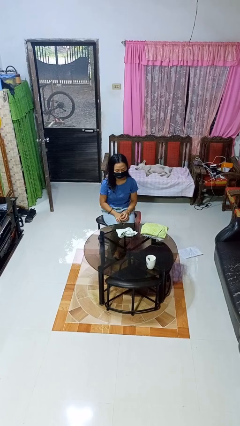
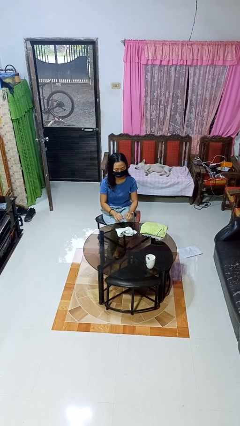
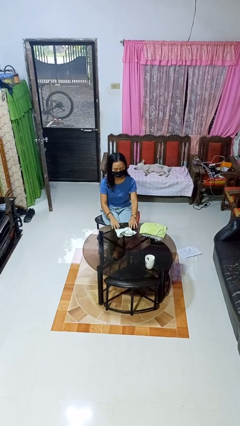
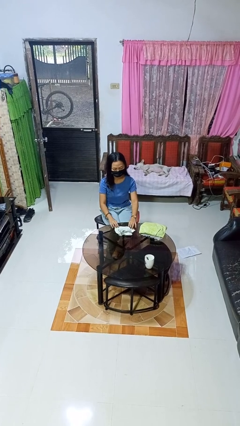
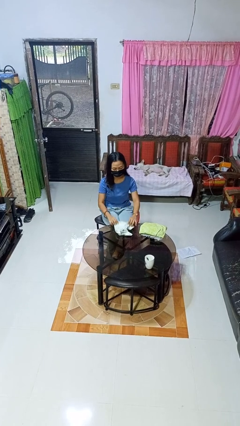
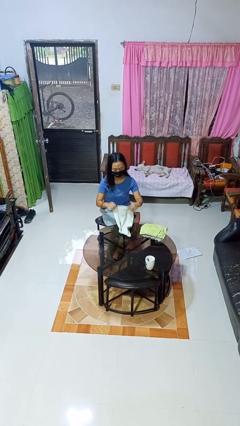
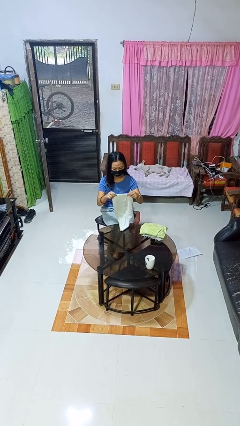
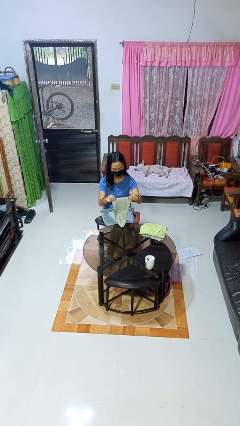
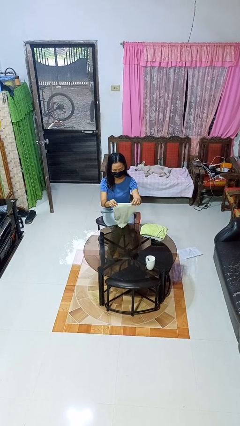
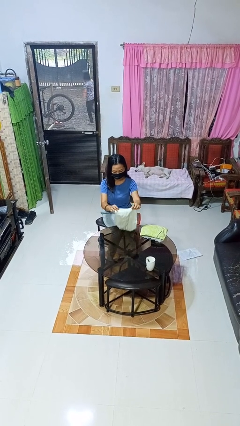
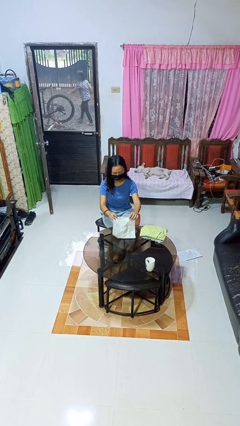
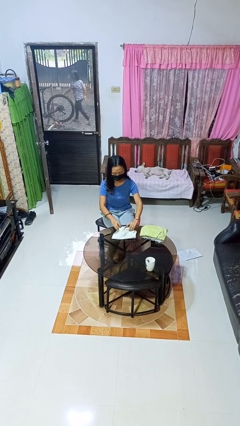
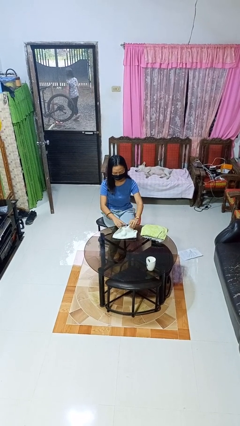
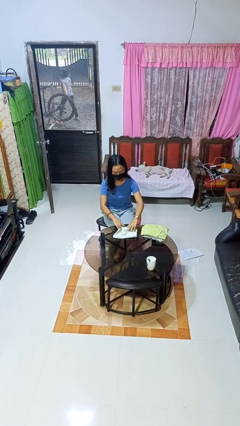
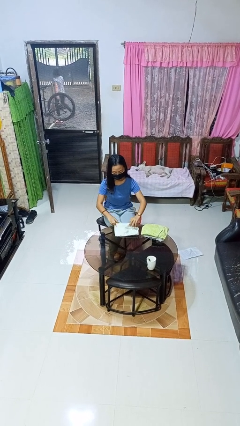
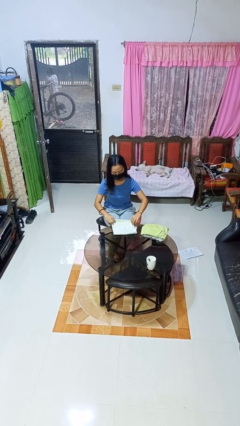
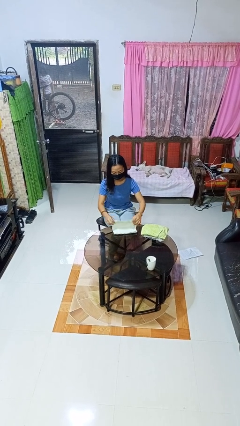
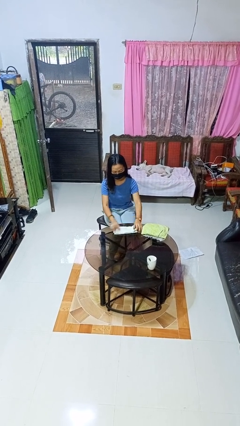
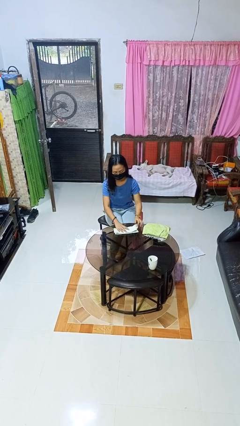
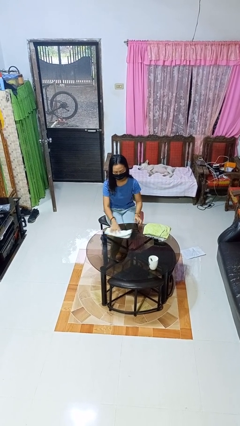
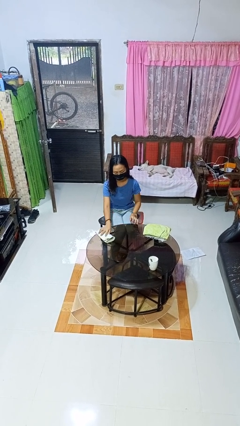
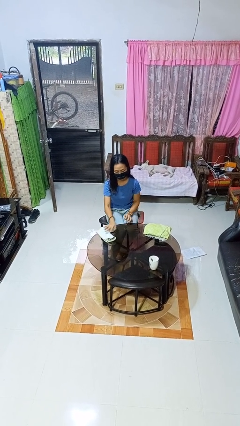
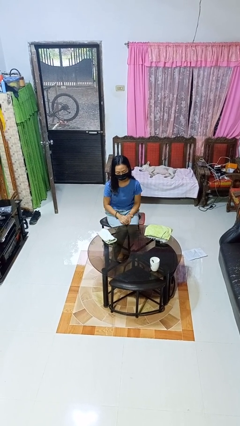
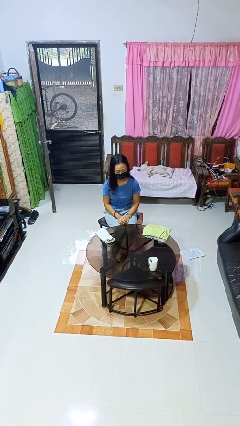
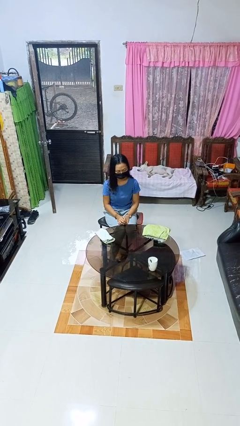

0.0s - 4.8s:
person folds towel

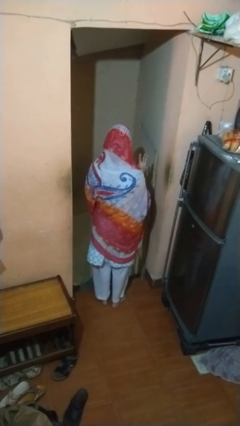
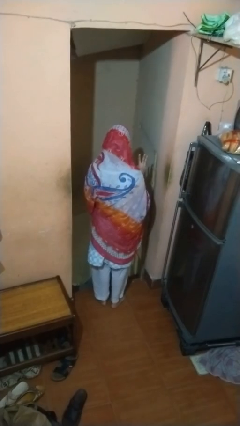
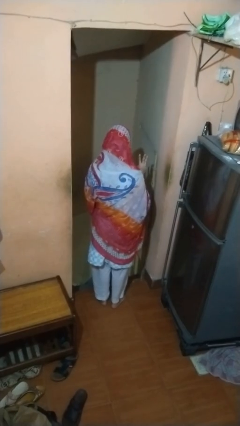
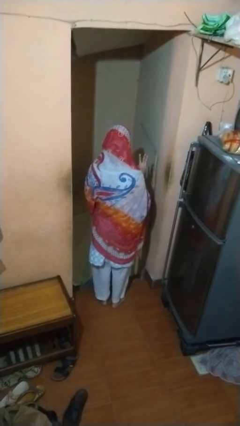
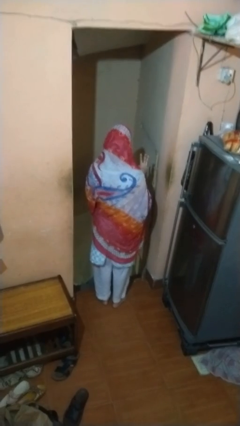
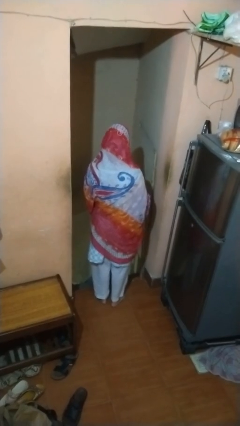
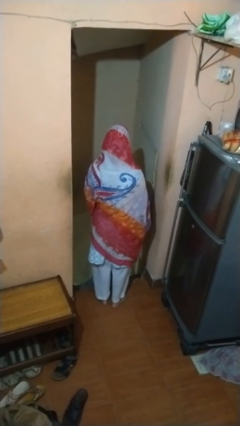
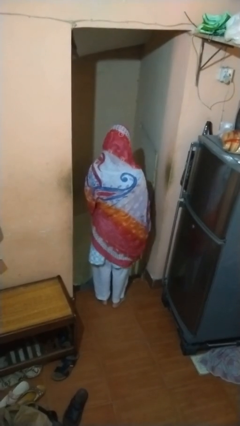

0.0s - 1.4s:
person gestures number three

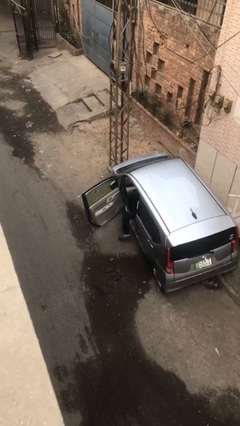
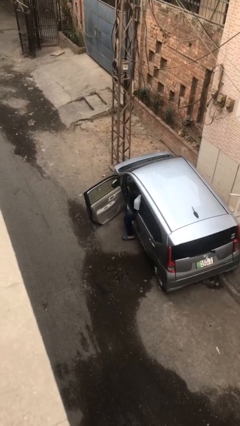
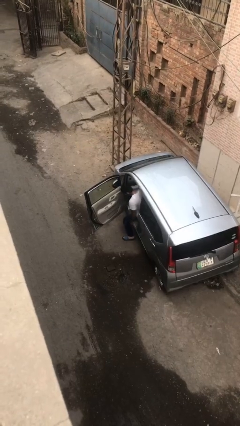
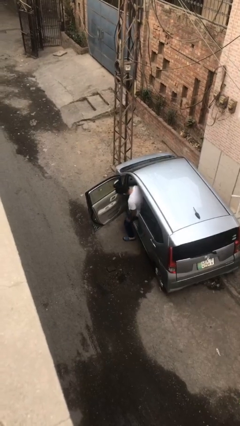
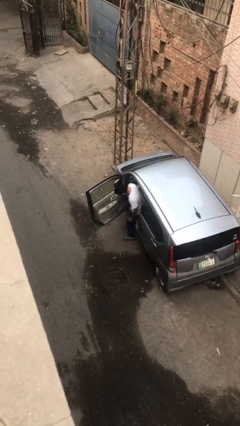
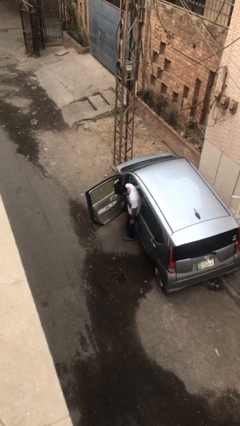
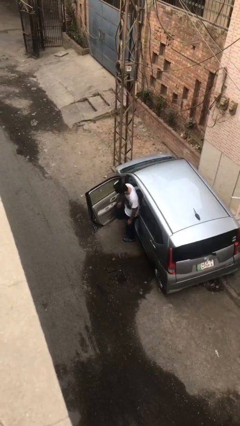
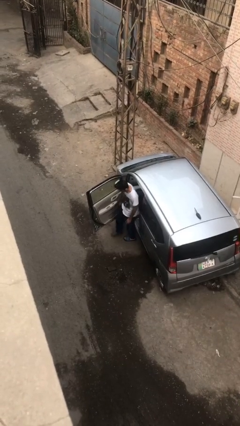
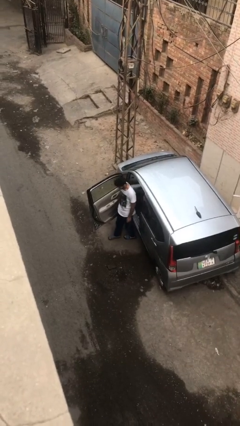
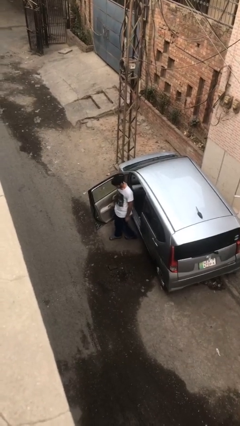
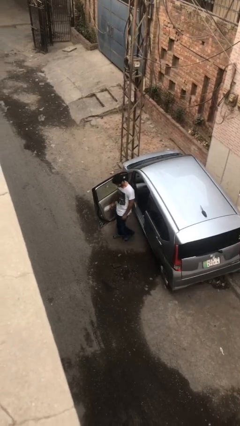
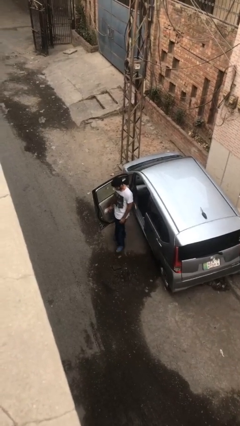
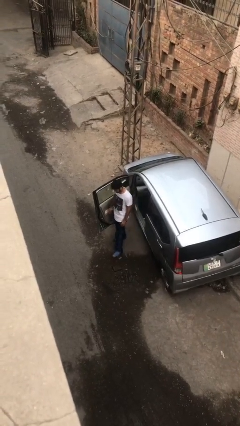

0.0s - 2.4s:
person exits car

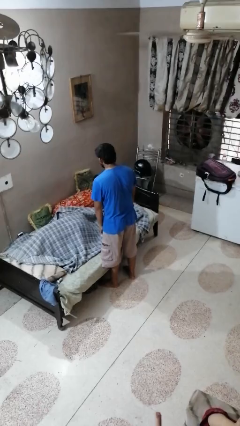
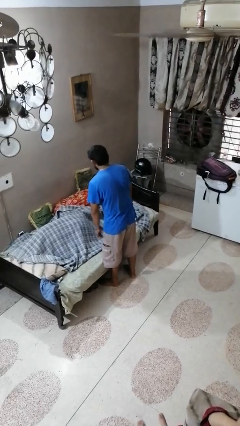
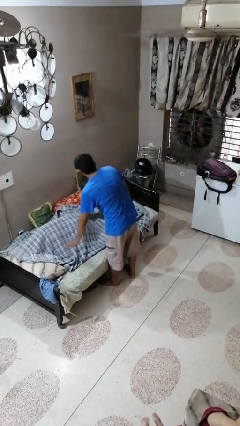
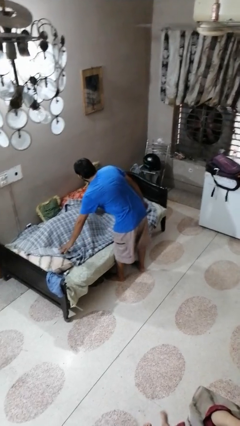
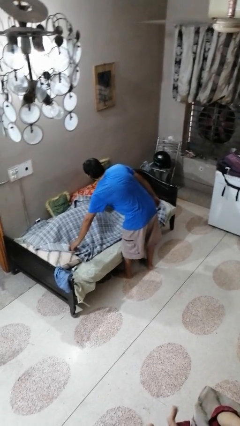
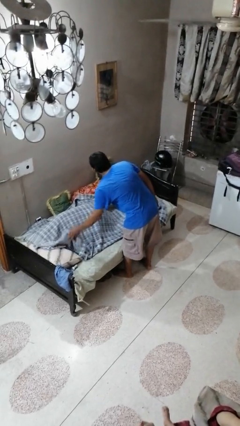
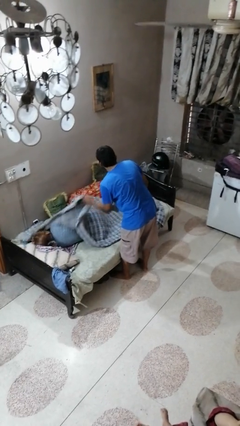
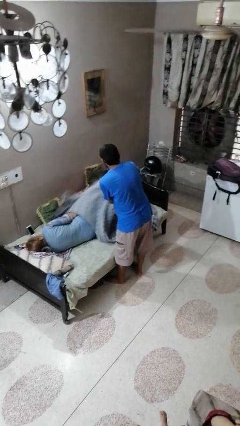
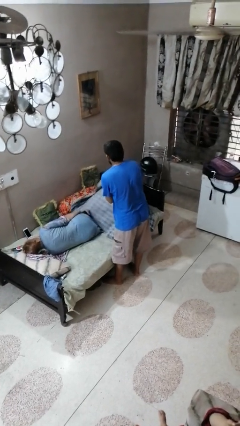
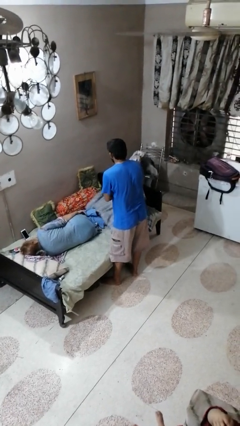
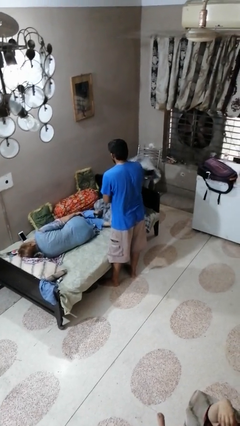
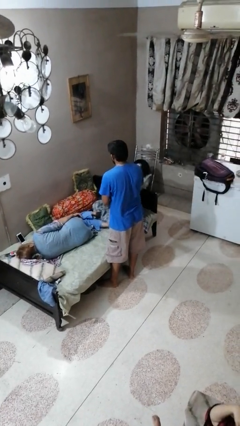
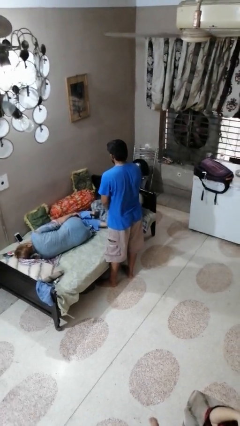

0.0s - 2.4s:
person uncovers friend with blanket

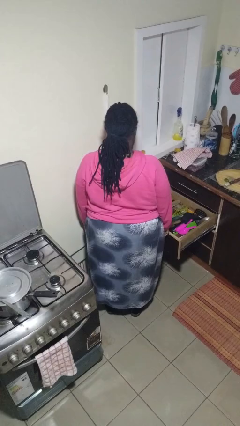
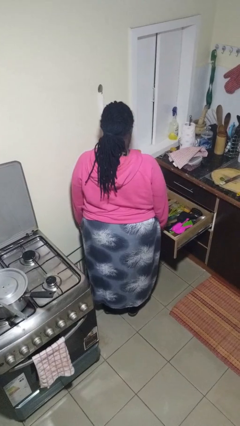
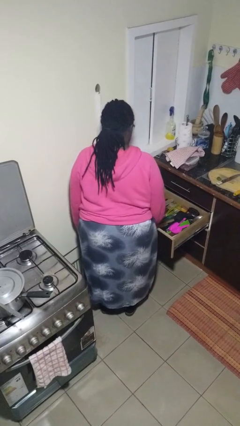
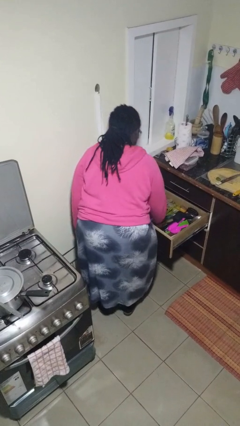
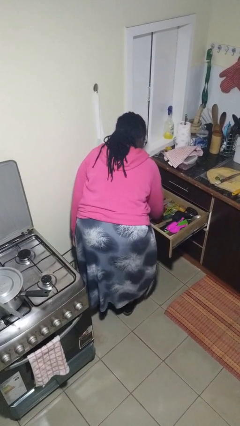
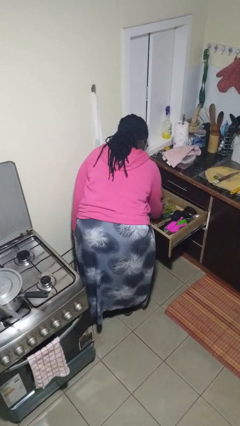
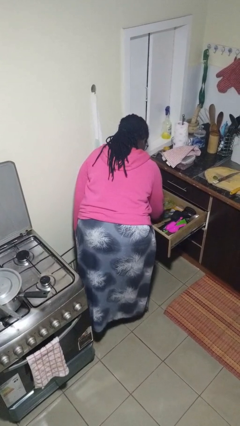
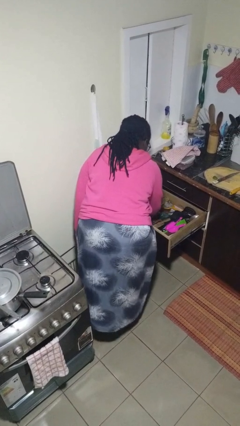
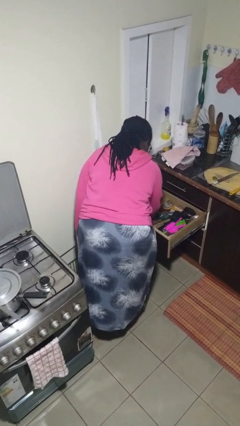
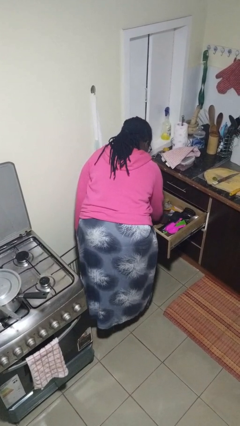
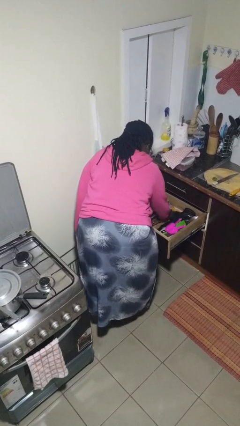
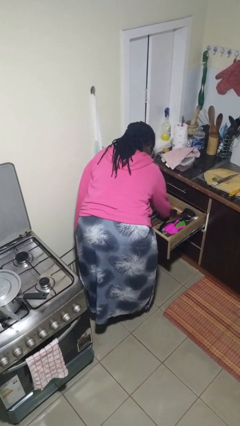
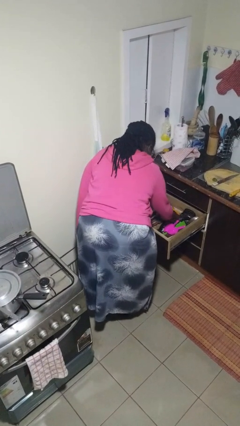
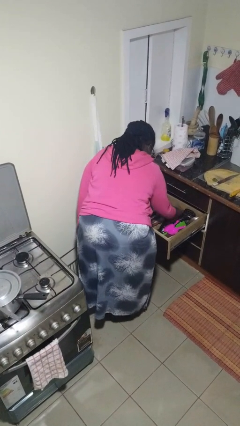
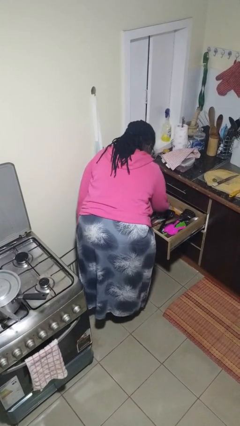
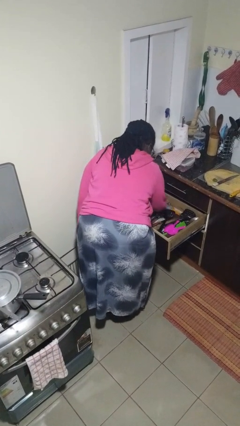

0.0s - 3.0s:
person searches in kitchen drawer

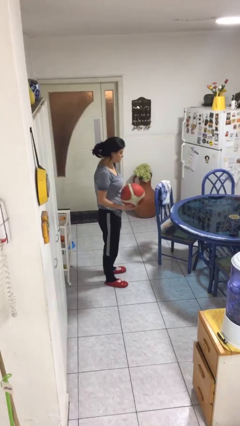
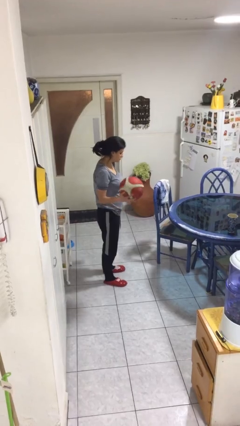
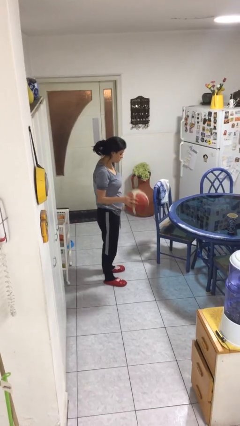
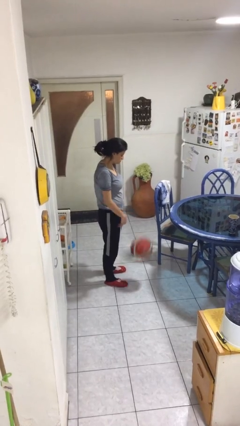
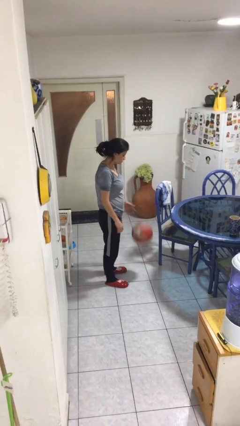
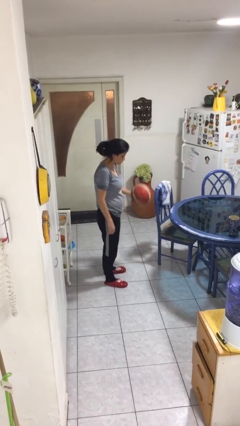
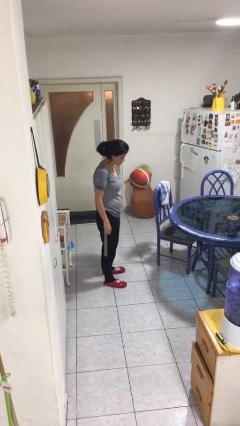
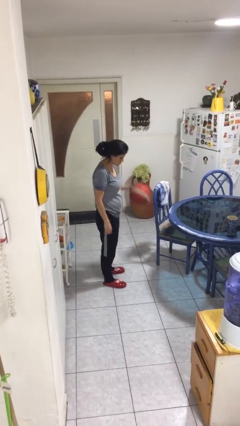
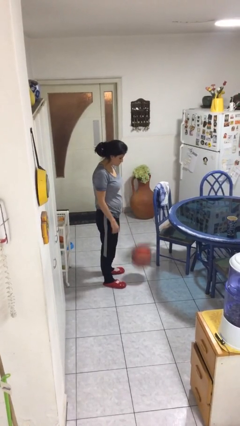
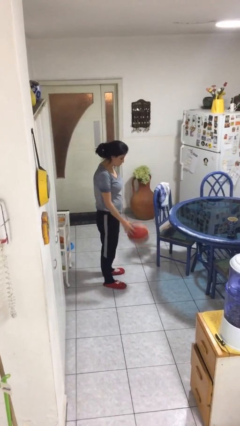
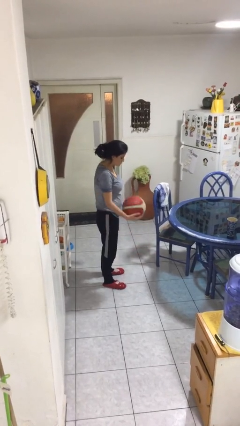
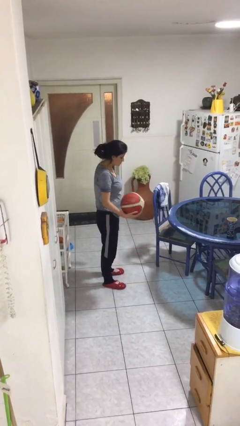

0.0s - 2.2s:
person bounces ball on floor

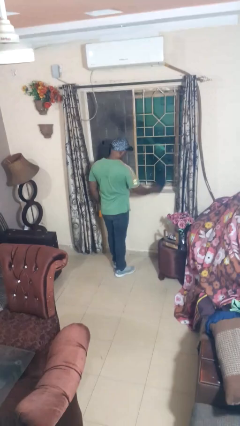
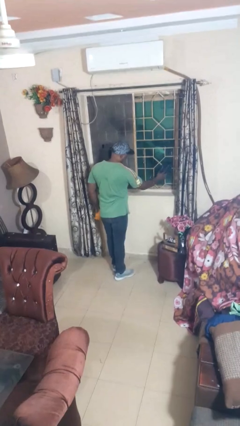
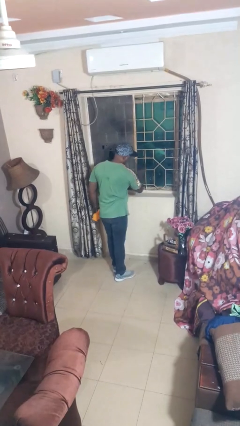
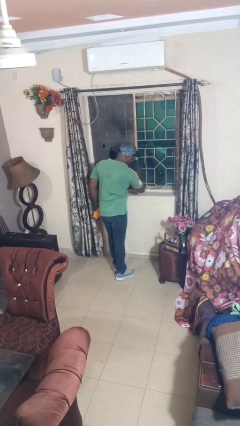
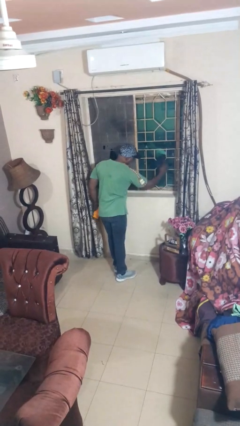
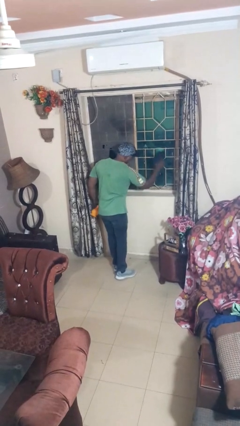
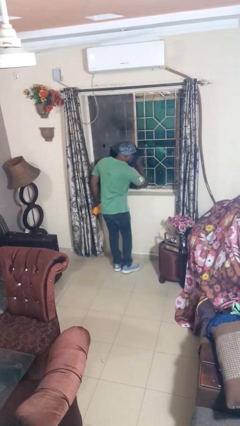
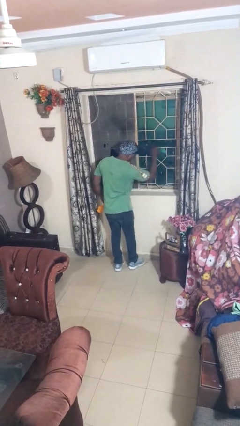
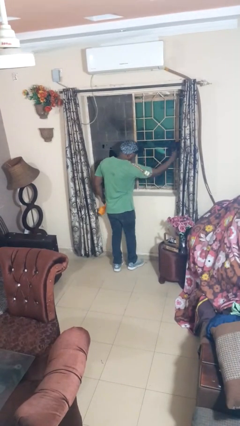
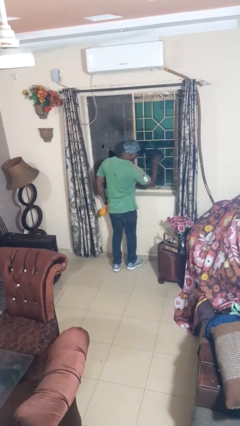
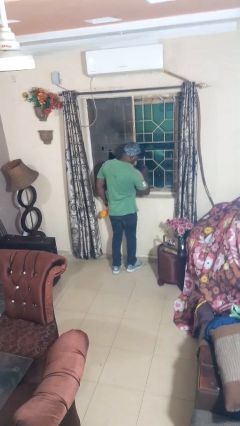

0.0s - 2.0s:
person washes window
